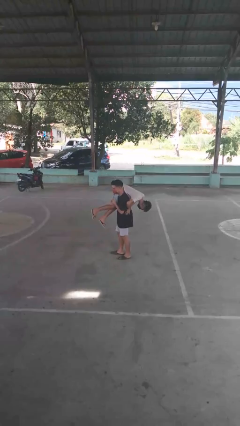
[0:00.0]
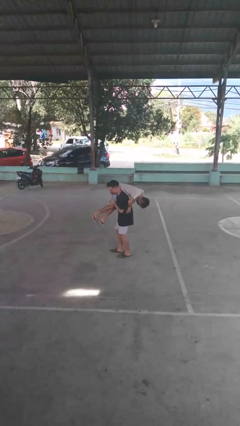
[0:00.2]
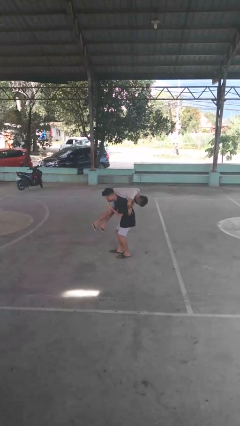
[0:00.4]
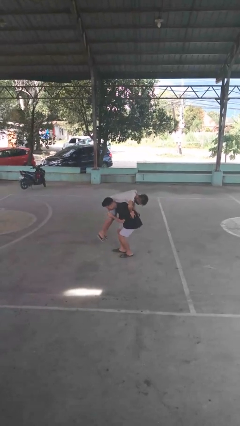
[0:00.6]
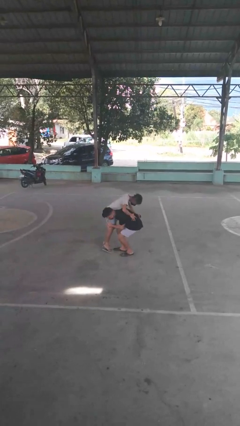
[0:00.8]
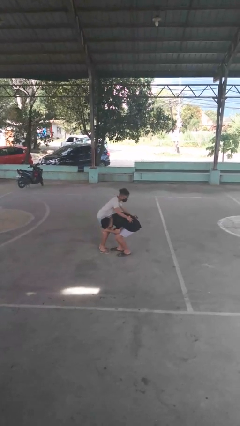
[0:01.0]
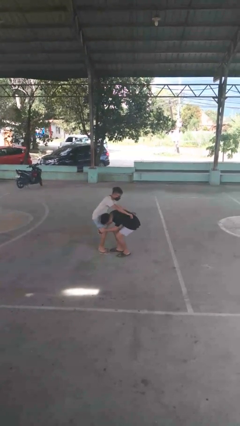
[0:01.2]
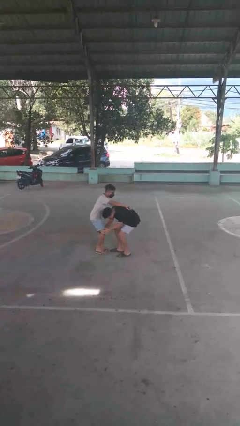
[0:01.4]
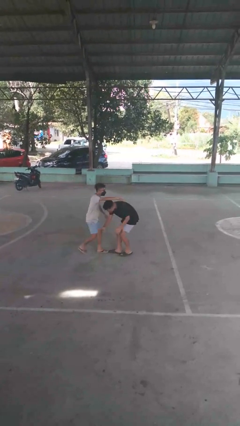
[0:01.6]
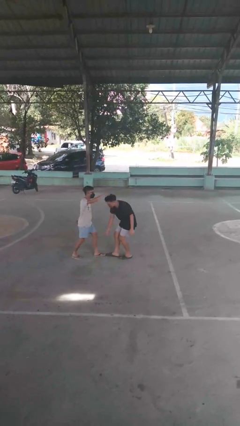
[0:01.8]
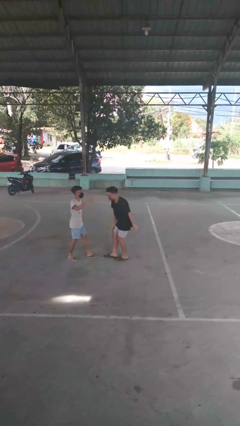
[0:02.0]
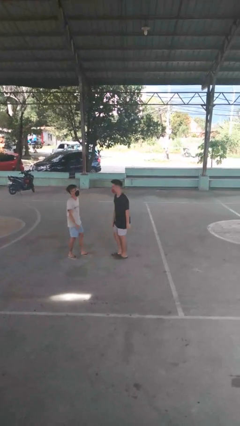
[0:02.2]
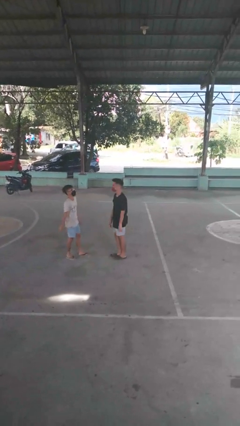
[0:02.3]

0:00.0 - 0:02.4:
person puts down person

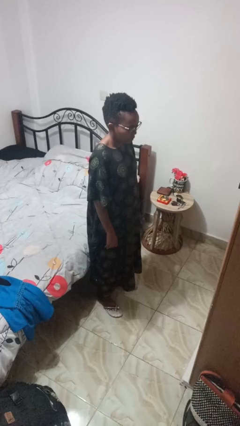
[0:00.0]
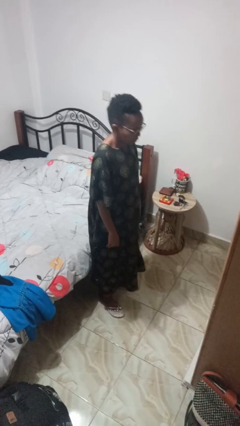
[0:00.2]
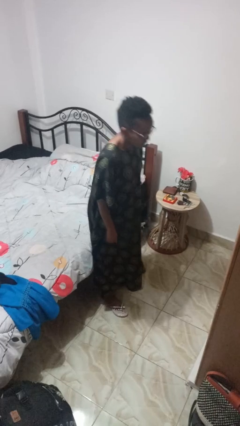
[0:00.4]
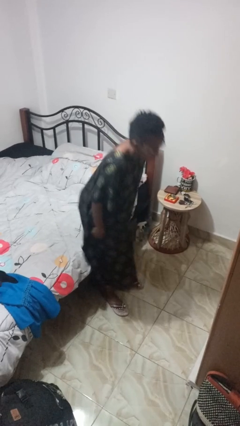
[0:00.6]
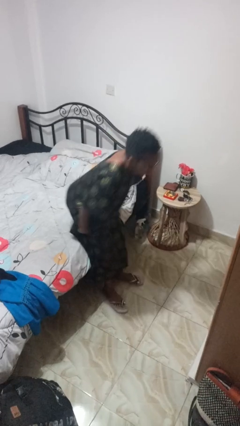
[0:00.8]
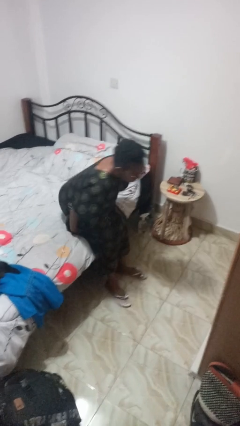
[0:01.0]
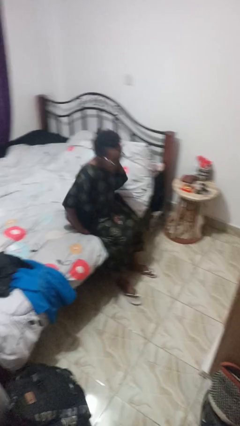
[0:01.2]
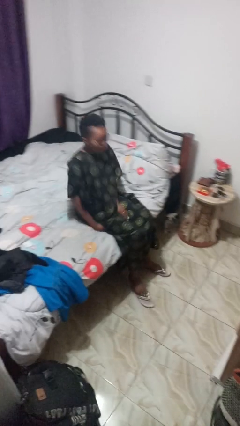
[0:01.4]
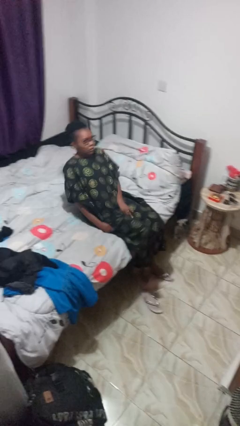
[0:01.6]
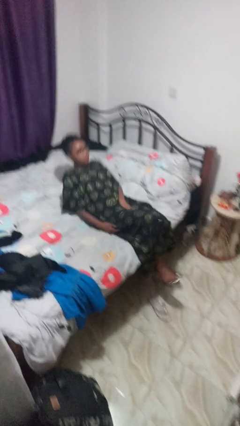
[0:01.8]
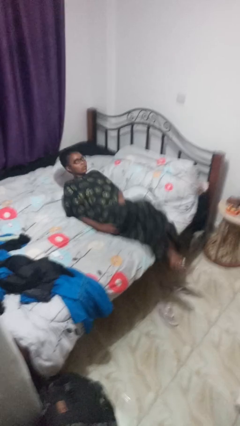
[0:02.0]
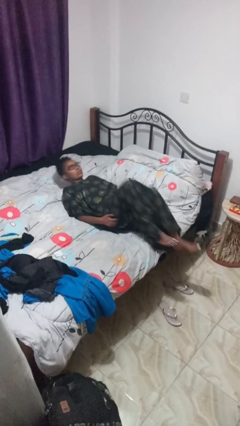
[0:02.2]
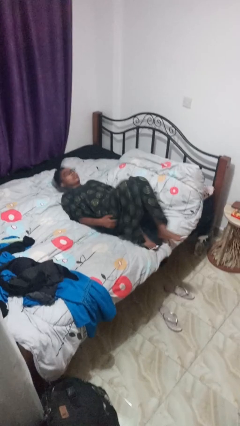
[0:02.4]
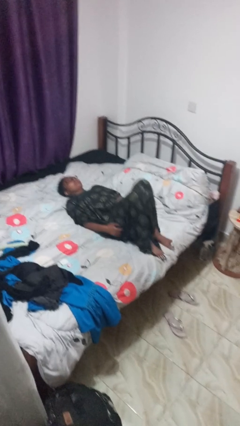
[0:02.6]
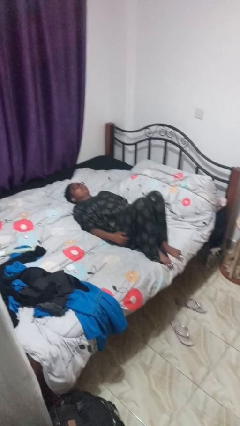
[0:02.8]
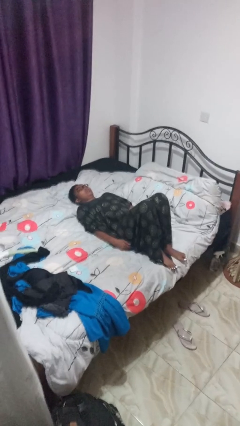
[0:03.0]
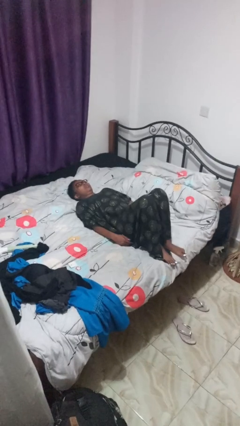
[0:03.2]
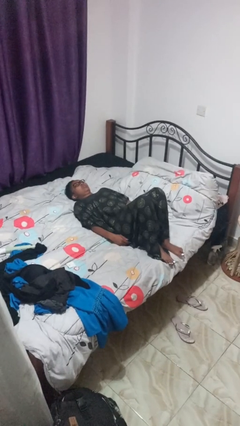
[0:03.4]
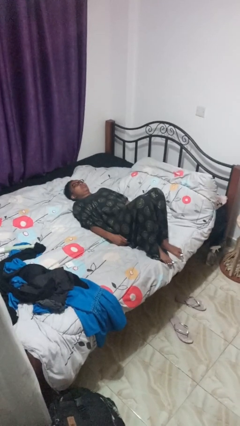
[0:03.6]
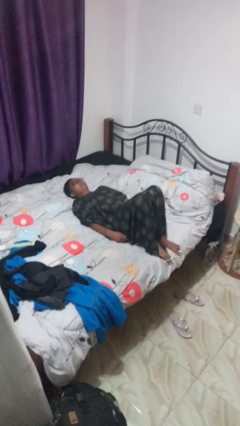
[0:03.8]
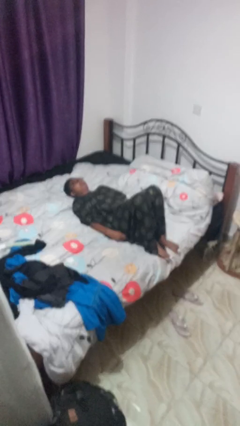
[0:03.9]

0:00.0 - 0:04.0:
person lies down on bed

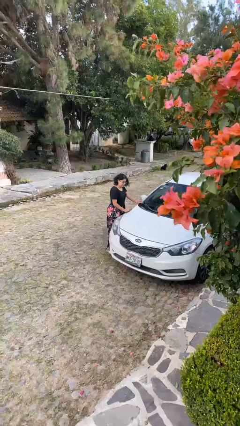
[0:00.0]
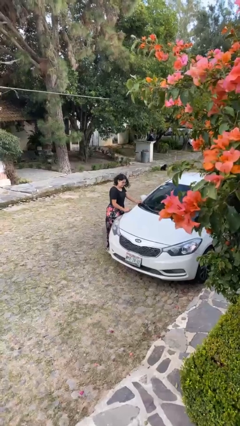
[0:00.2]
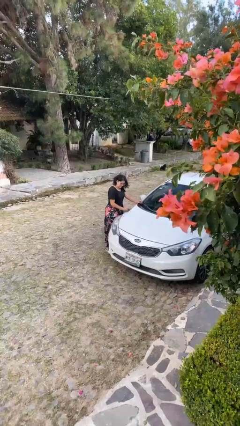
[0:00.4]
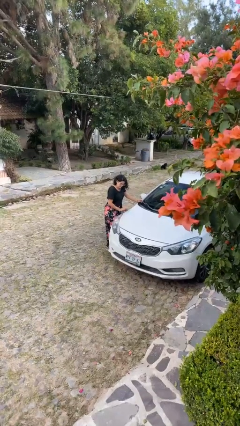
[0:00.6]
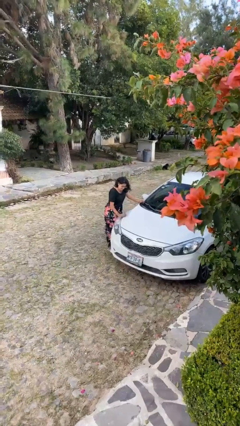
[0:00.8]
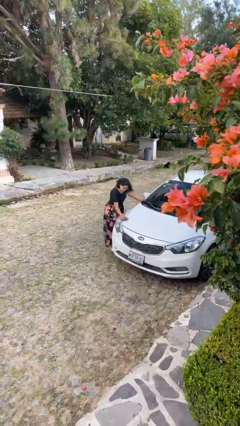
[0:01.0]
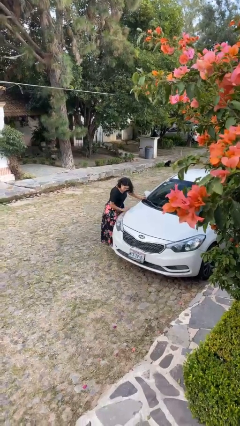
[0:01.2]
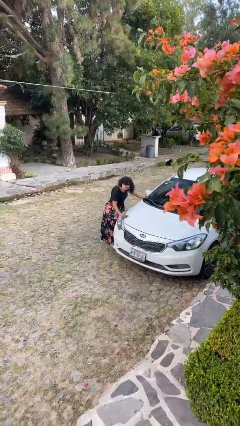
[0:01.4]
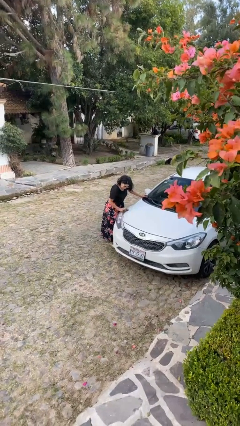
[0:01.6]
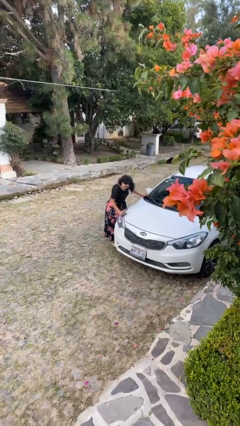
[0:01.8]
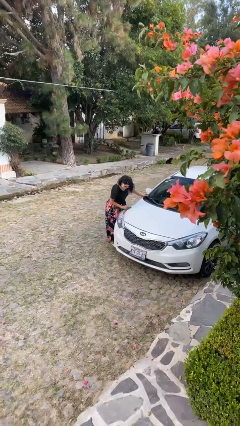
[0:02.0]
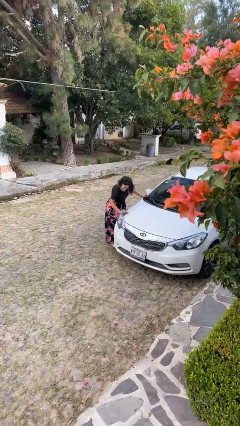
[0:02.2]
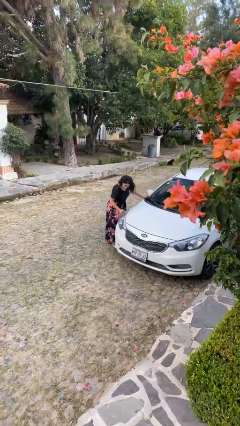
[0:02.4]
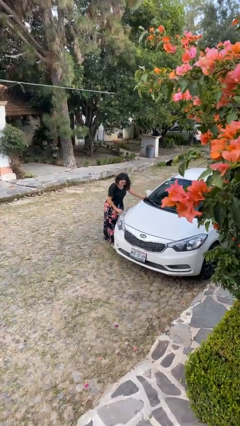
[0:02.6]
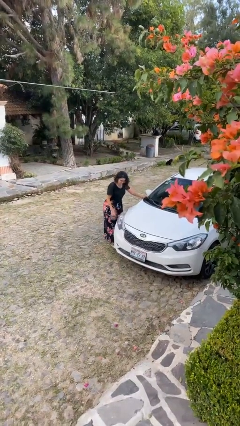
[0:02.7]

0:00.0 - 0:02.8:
person polishes car with rag

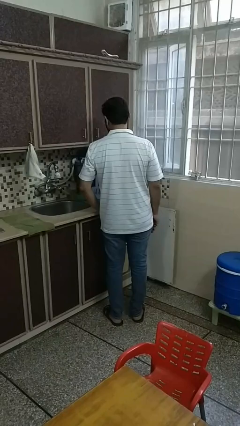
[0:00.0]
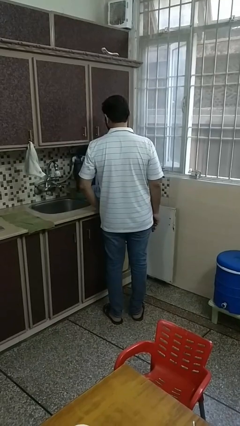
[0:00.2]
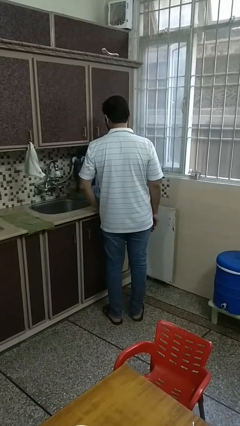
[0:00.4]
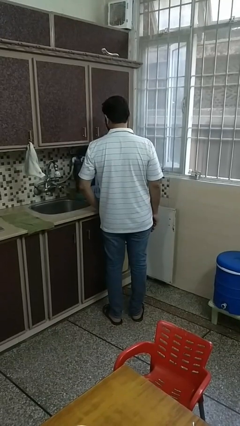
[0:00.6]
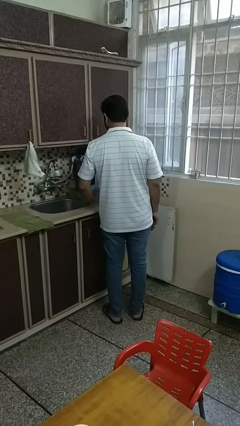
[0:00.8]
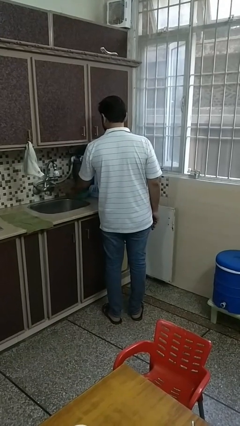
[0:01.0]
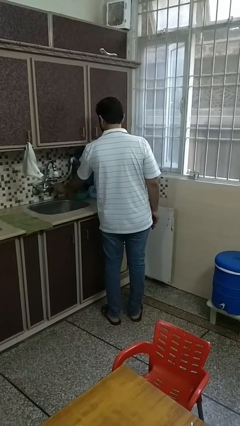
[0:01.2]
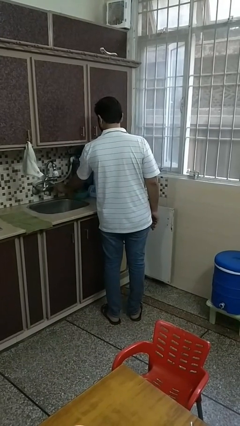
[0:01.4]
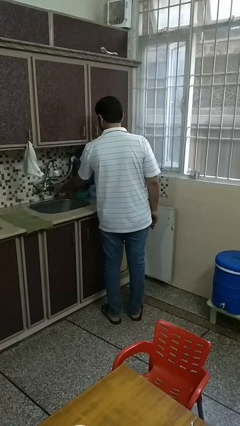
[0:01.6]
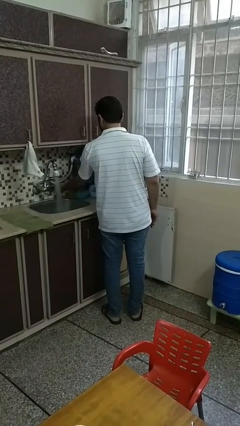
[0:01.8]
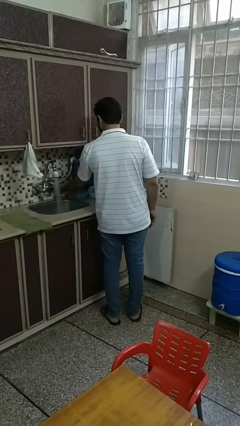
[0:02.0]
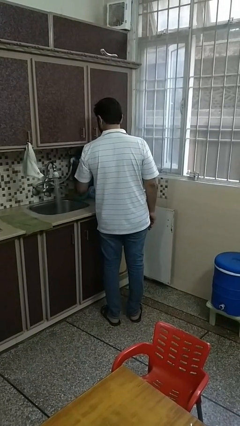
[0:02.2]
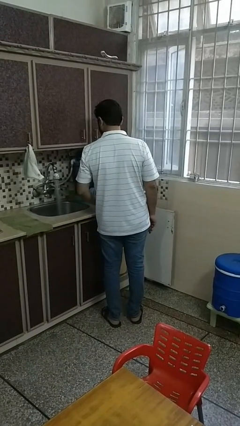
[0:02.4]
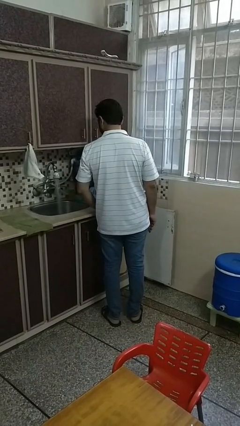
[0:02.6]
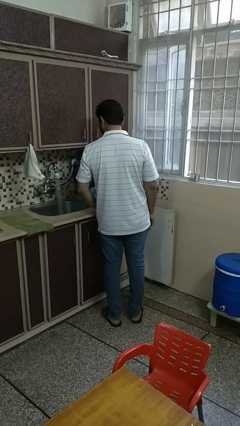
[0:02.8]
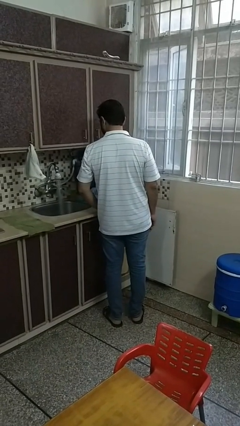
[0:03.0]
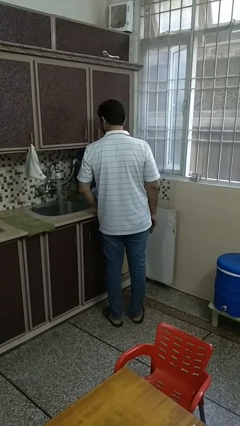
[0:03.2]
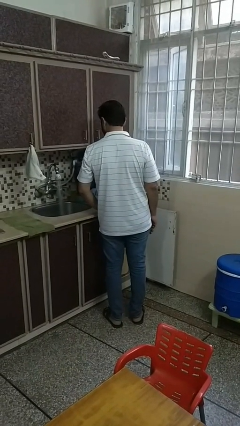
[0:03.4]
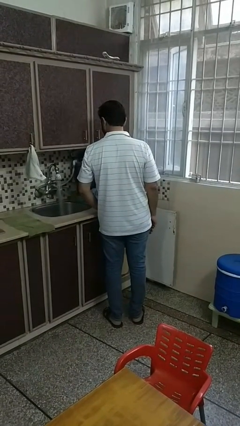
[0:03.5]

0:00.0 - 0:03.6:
person turns on faucet

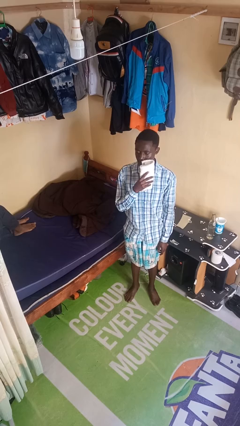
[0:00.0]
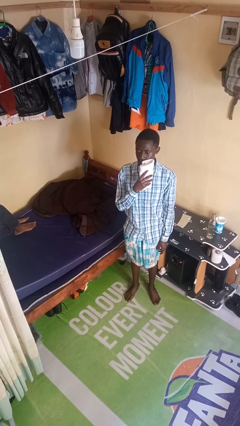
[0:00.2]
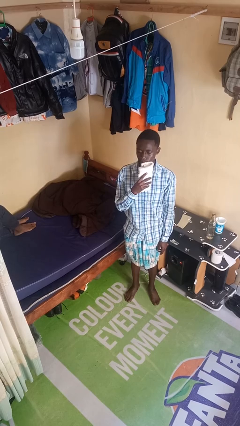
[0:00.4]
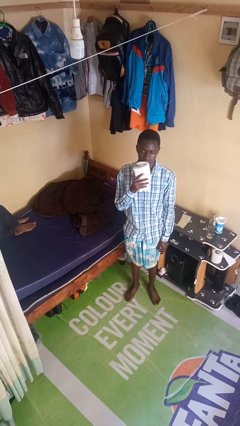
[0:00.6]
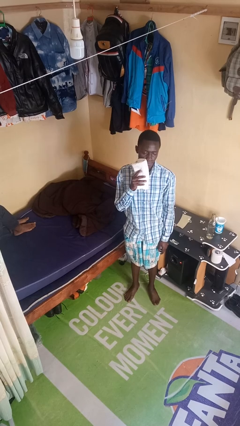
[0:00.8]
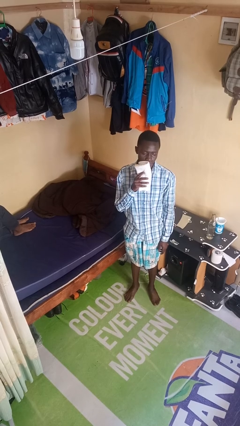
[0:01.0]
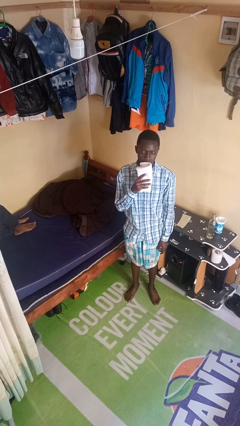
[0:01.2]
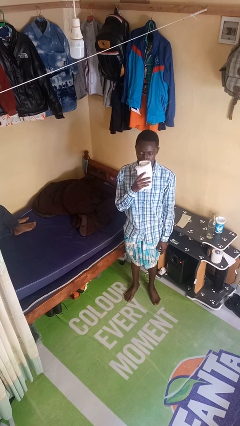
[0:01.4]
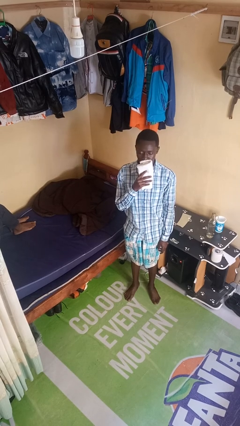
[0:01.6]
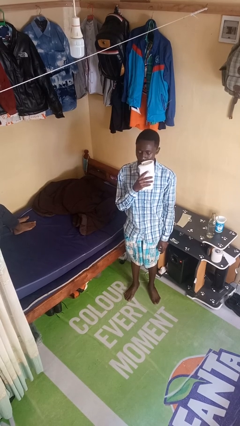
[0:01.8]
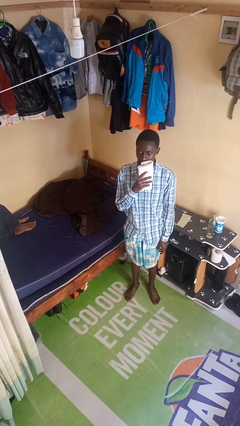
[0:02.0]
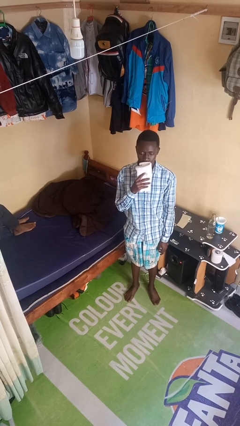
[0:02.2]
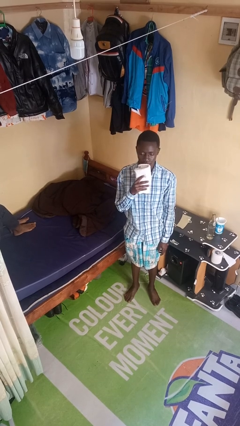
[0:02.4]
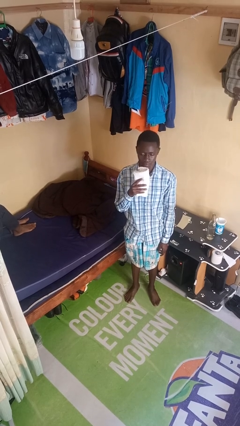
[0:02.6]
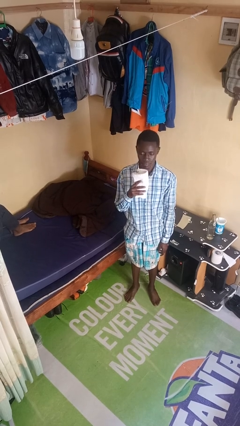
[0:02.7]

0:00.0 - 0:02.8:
person wipes mouth with napkin

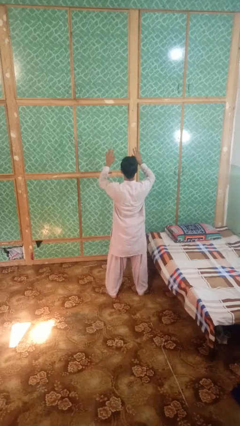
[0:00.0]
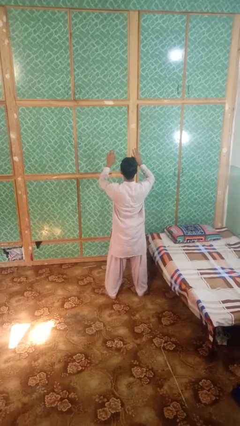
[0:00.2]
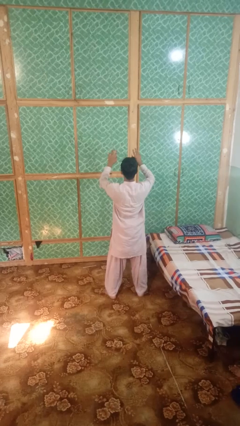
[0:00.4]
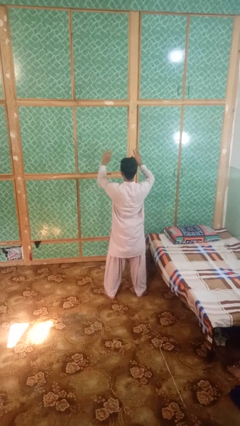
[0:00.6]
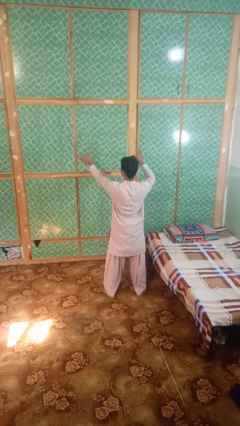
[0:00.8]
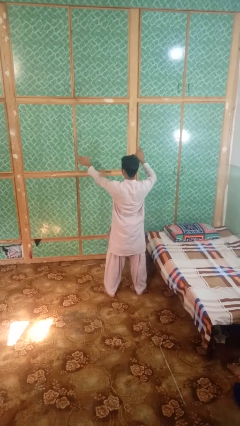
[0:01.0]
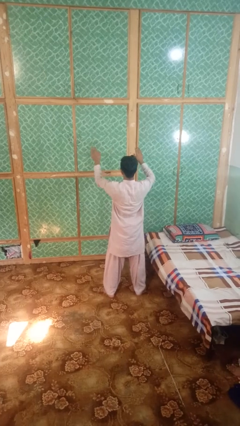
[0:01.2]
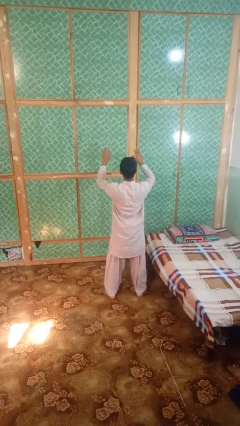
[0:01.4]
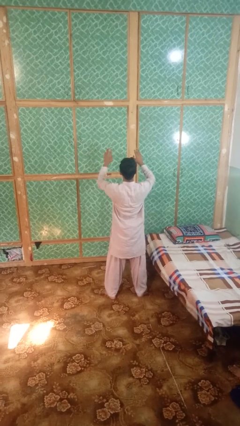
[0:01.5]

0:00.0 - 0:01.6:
person gestures swipe left

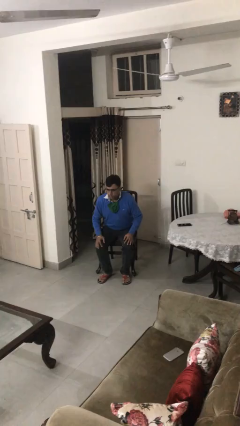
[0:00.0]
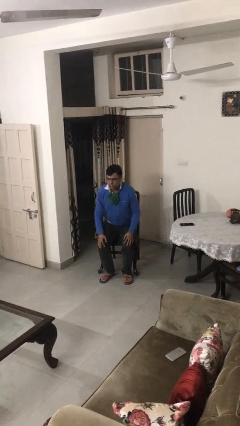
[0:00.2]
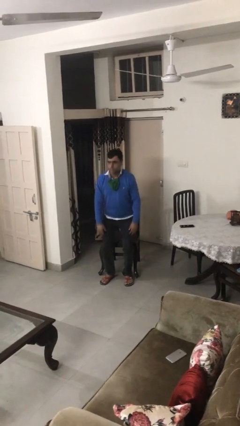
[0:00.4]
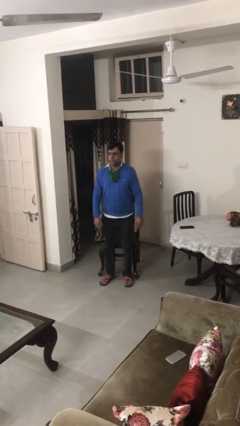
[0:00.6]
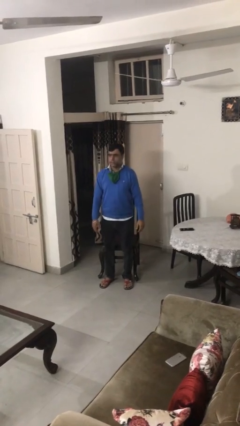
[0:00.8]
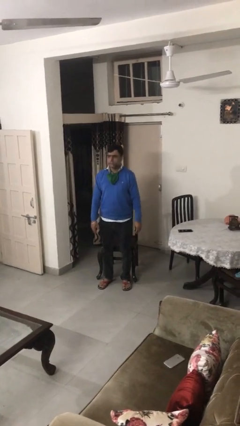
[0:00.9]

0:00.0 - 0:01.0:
person stands up
